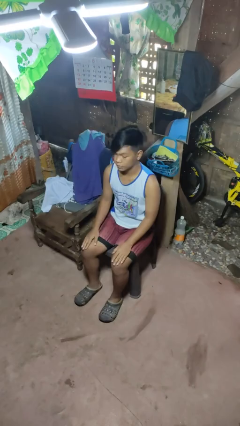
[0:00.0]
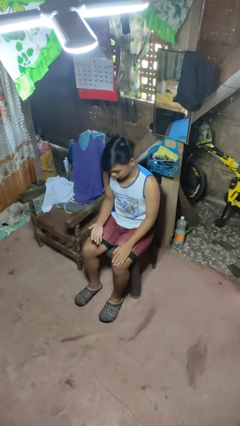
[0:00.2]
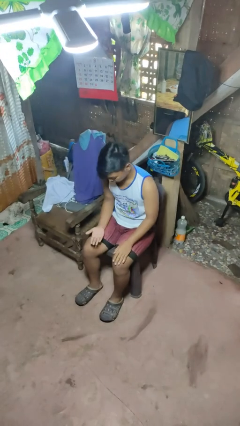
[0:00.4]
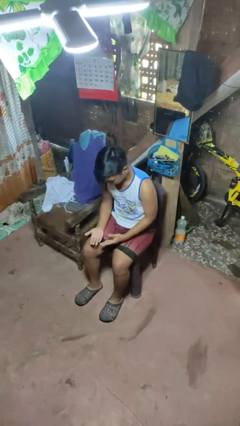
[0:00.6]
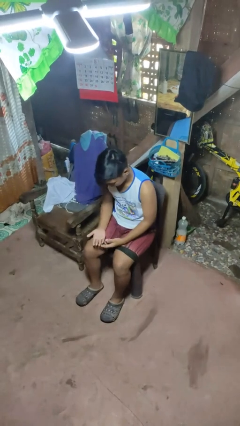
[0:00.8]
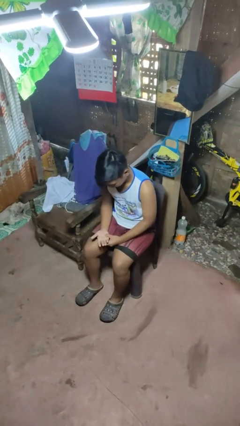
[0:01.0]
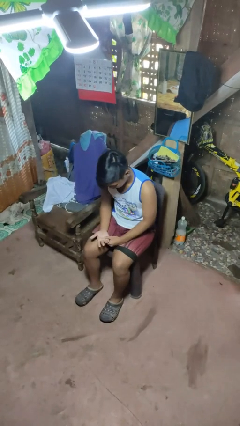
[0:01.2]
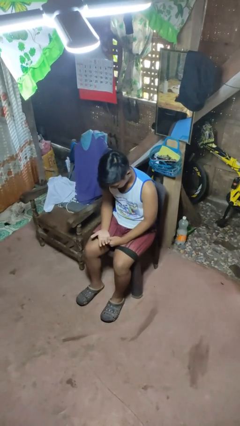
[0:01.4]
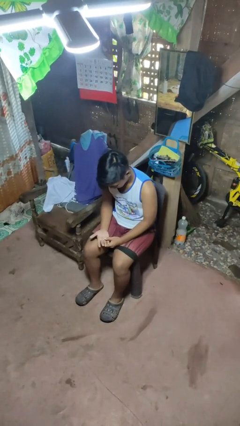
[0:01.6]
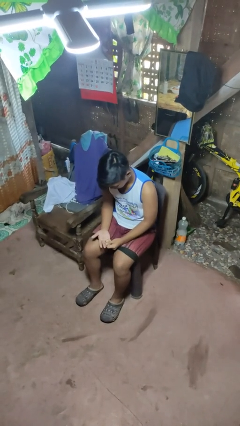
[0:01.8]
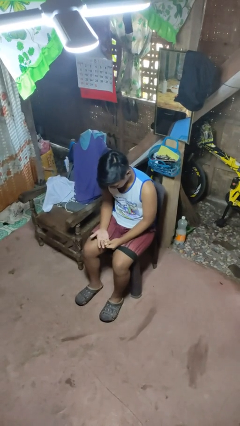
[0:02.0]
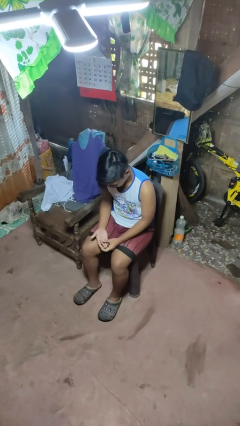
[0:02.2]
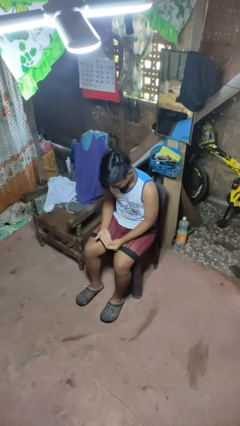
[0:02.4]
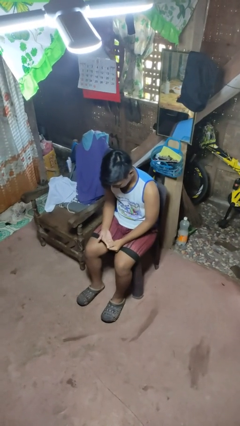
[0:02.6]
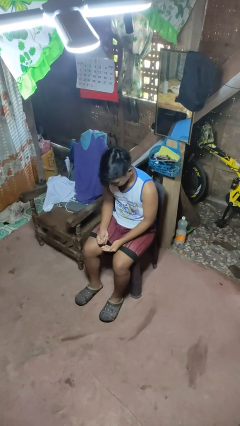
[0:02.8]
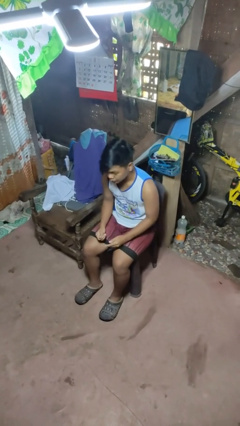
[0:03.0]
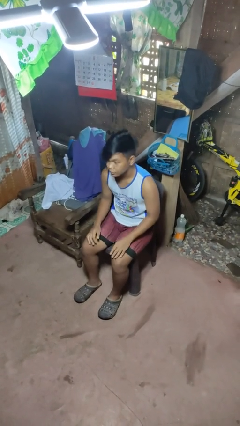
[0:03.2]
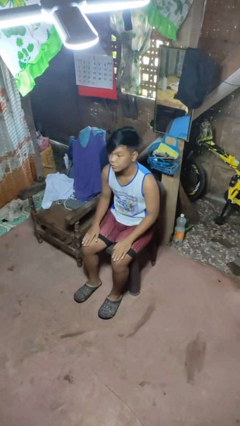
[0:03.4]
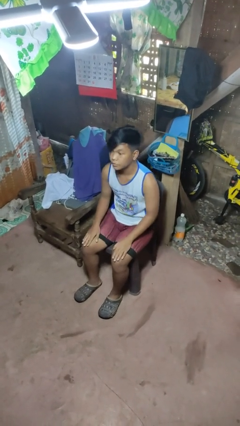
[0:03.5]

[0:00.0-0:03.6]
person looks at hands in lap

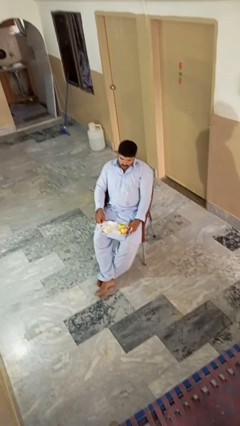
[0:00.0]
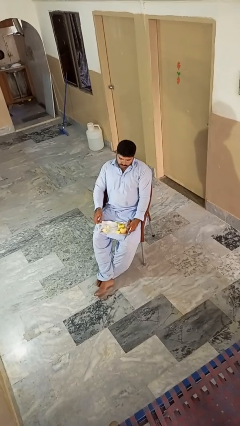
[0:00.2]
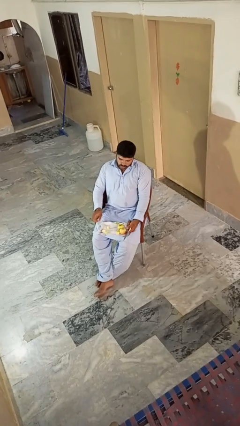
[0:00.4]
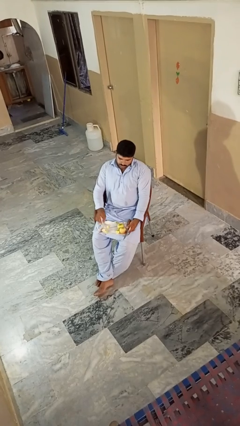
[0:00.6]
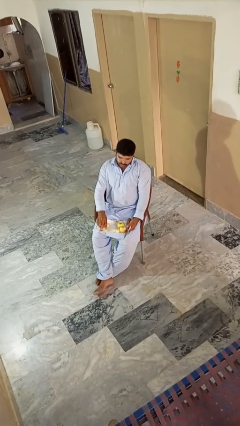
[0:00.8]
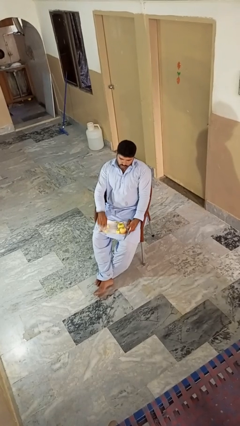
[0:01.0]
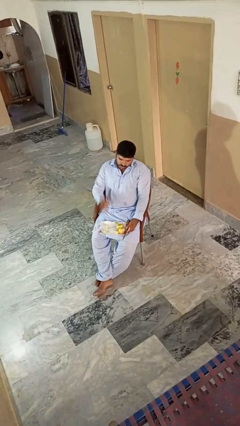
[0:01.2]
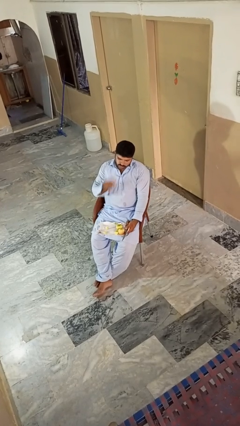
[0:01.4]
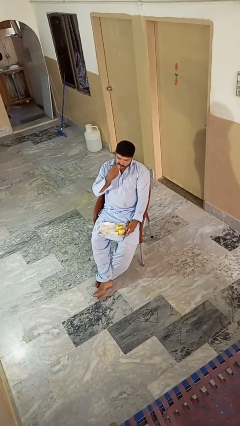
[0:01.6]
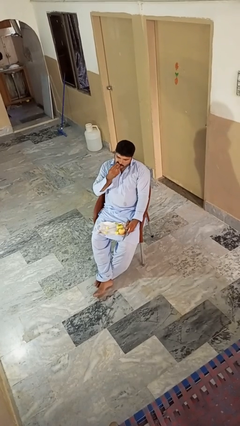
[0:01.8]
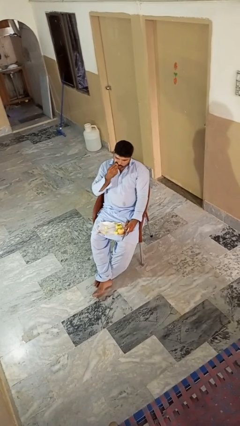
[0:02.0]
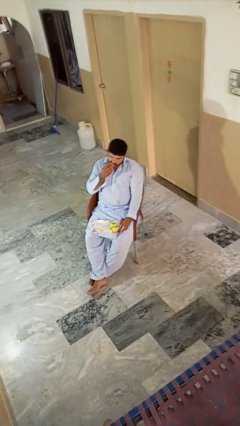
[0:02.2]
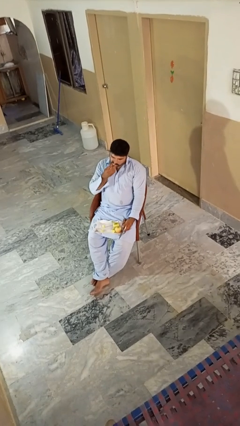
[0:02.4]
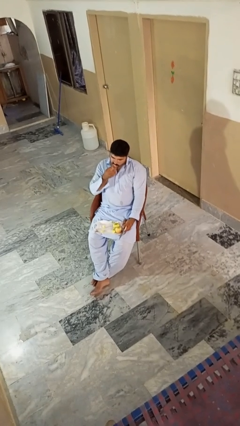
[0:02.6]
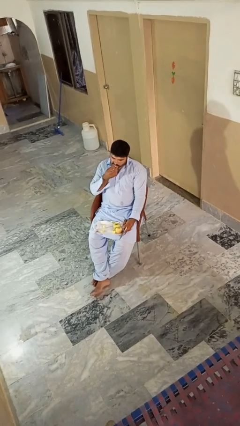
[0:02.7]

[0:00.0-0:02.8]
person eats apple

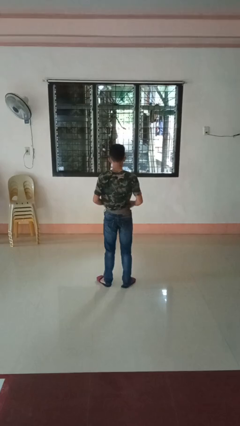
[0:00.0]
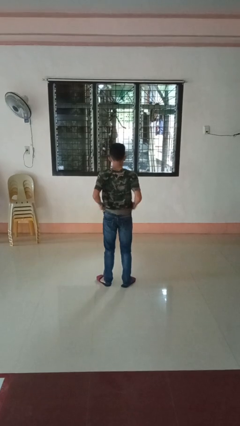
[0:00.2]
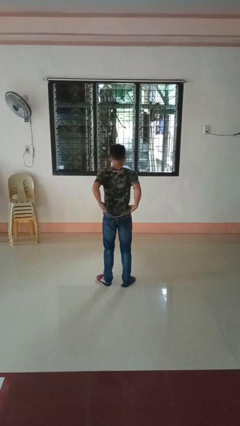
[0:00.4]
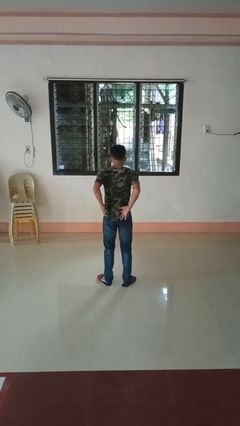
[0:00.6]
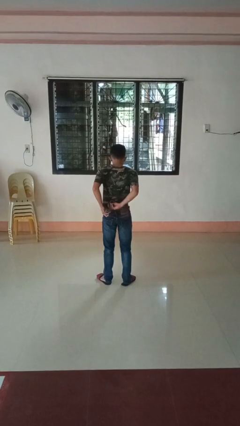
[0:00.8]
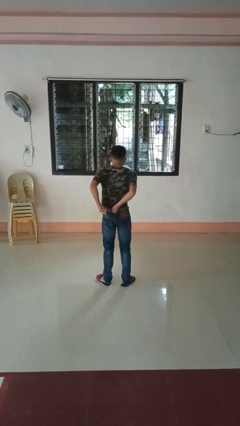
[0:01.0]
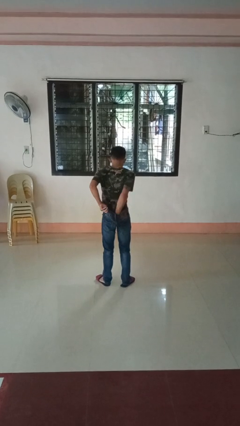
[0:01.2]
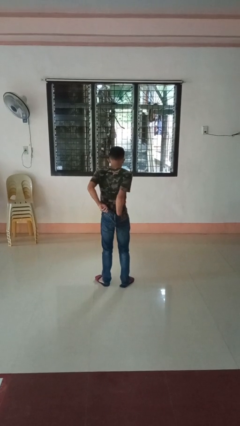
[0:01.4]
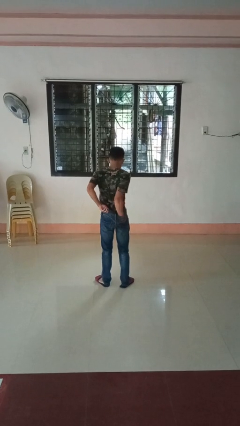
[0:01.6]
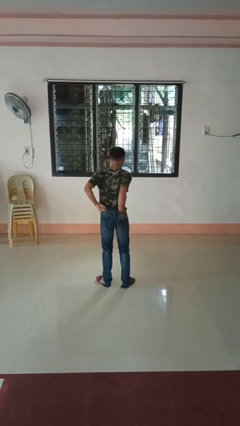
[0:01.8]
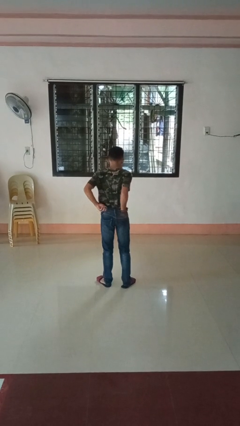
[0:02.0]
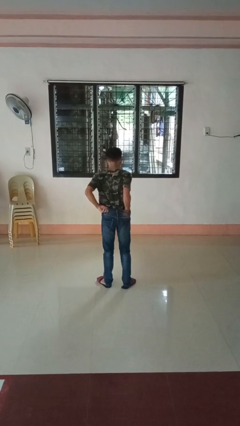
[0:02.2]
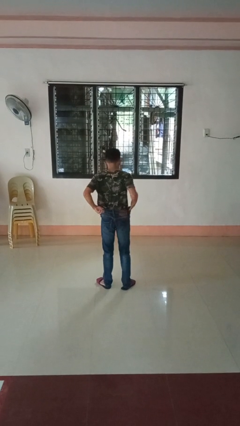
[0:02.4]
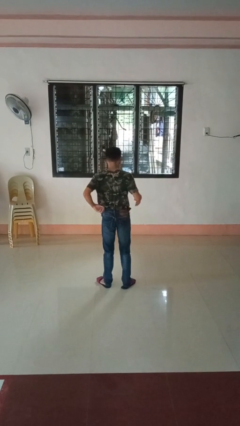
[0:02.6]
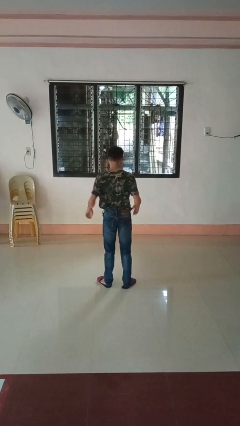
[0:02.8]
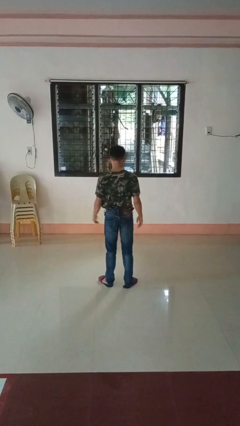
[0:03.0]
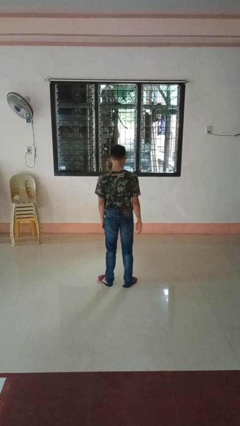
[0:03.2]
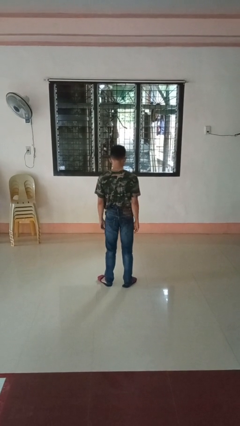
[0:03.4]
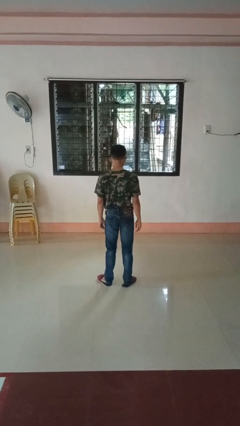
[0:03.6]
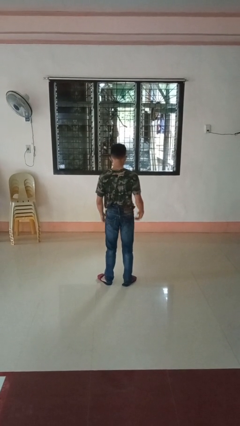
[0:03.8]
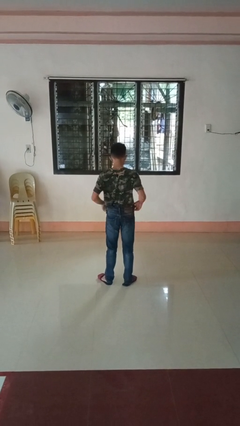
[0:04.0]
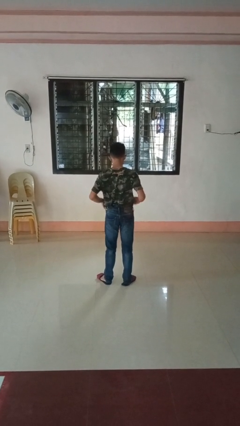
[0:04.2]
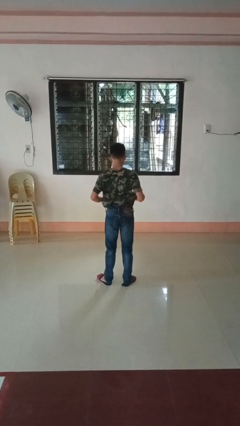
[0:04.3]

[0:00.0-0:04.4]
person tucks in shirt

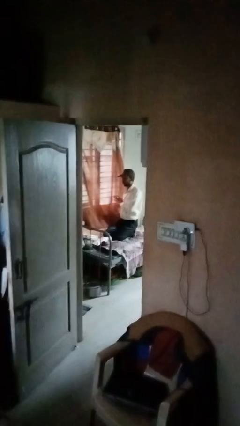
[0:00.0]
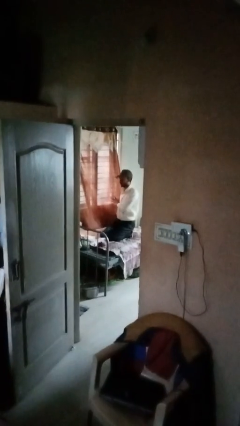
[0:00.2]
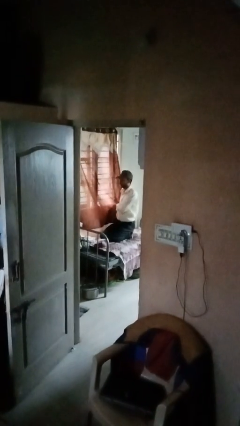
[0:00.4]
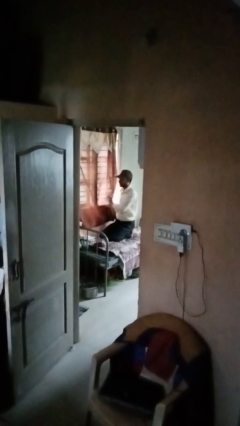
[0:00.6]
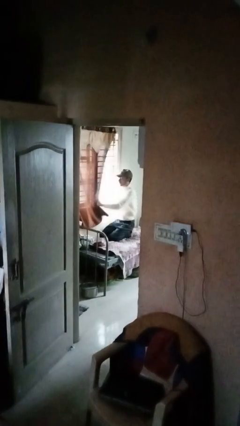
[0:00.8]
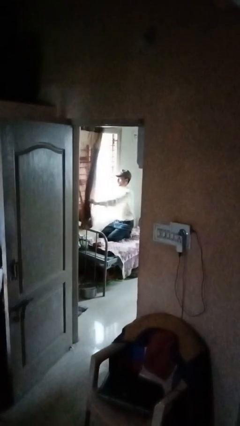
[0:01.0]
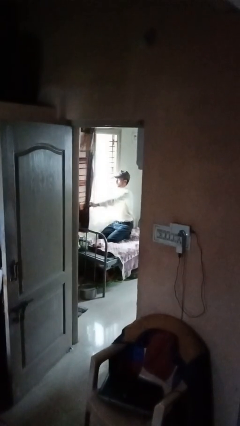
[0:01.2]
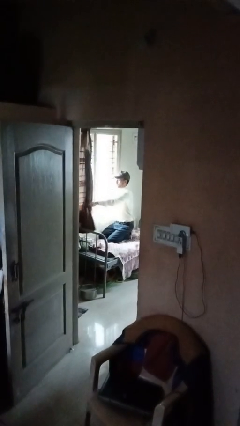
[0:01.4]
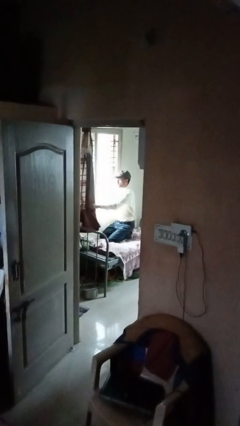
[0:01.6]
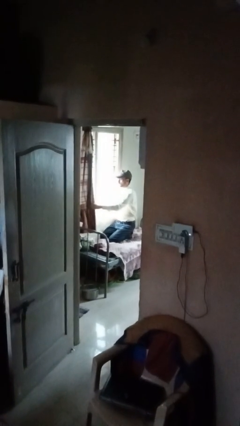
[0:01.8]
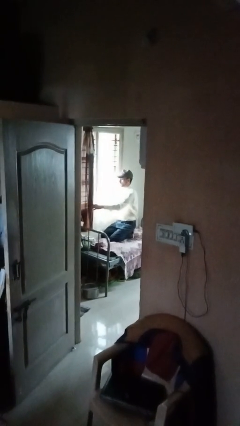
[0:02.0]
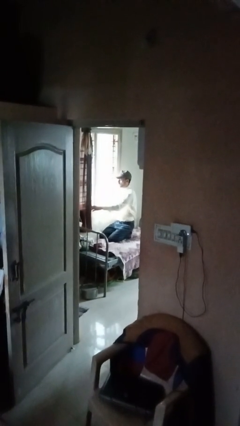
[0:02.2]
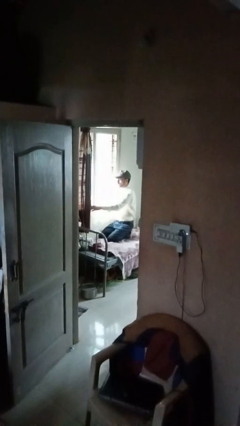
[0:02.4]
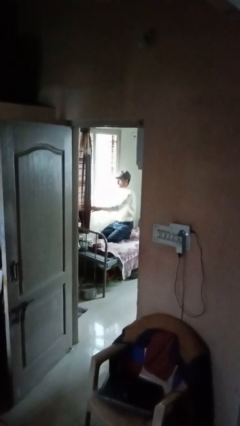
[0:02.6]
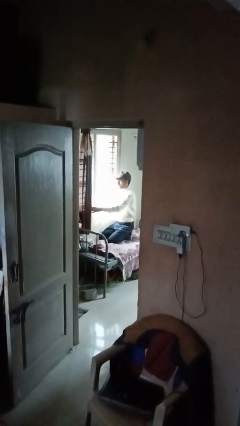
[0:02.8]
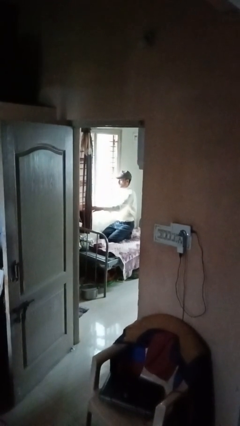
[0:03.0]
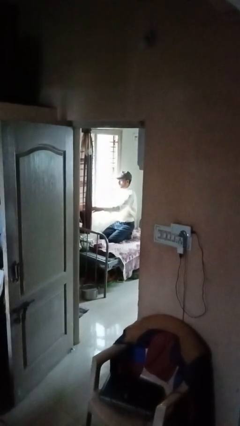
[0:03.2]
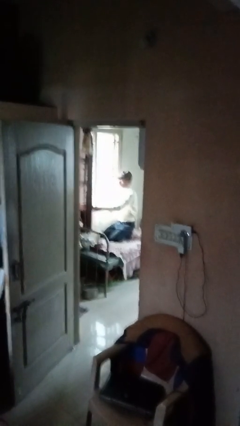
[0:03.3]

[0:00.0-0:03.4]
person opens curtains

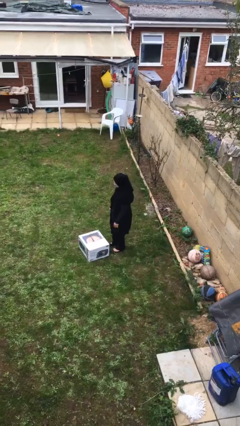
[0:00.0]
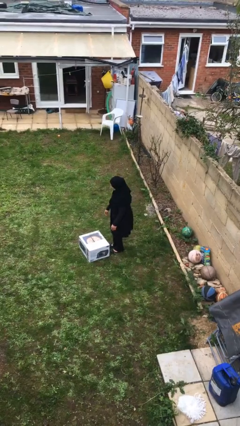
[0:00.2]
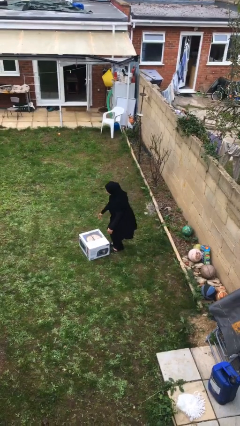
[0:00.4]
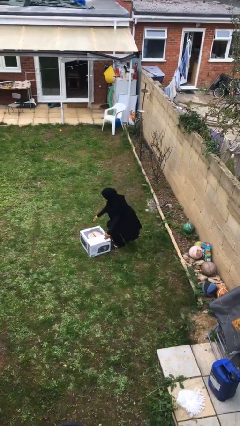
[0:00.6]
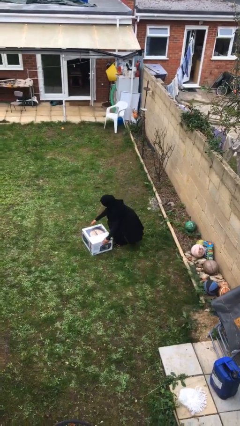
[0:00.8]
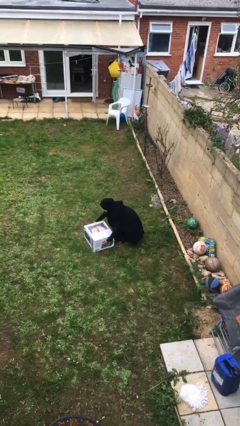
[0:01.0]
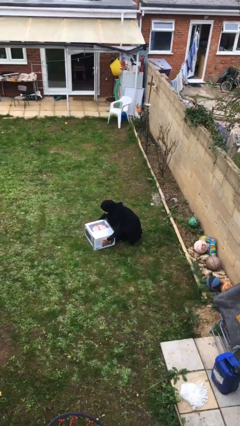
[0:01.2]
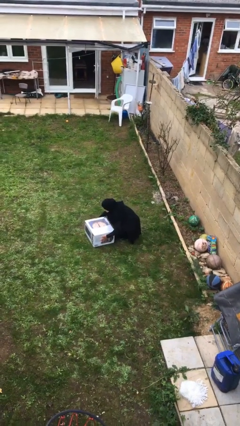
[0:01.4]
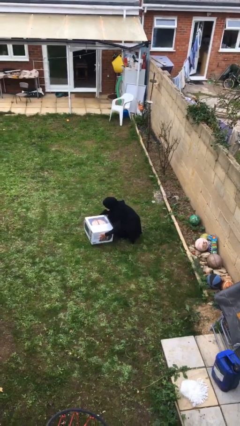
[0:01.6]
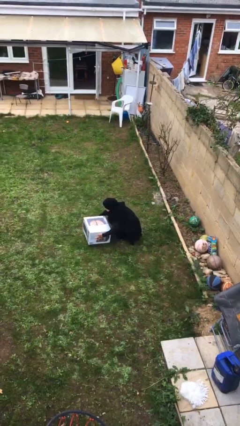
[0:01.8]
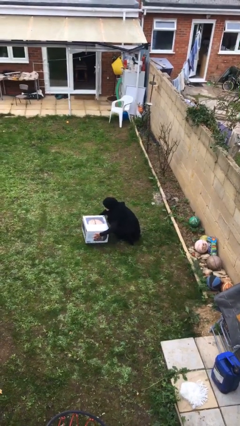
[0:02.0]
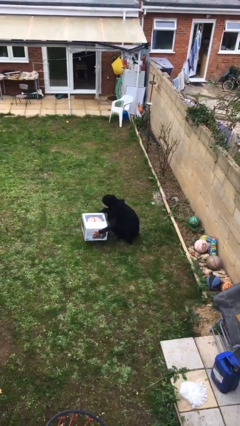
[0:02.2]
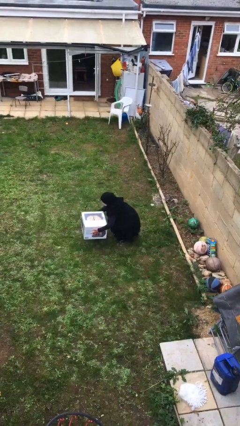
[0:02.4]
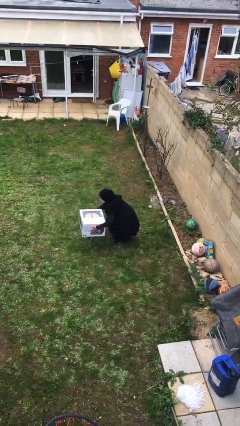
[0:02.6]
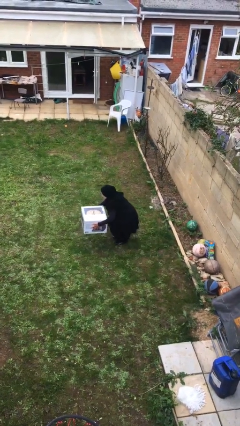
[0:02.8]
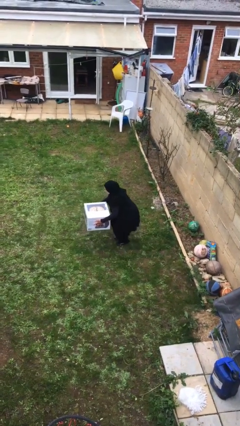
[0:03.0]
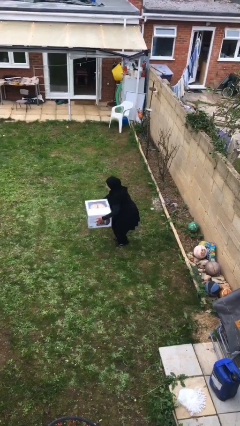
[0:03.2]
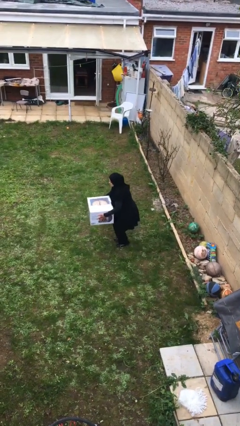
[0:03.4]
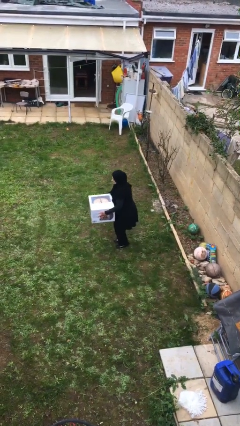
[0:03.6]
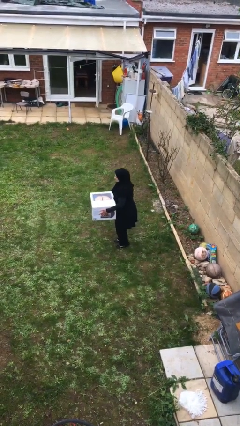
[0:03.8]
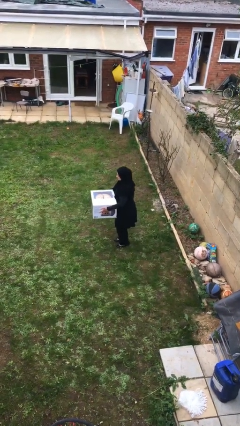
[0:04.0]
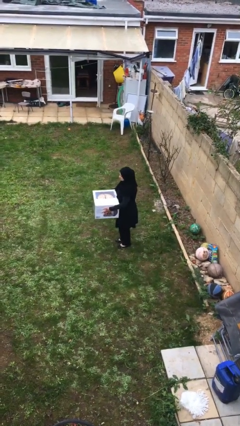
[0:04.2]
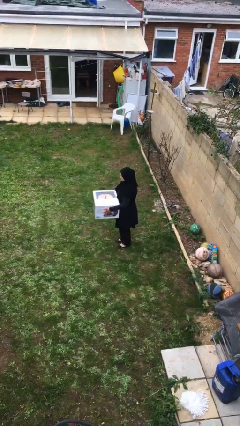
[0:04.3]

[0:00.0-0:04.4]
person picks up object from floor
